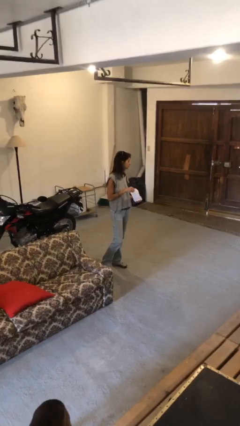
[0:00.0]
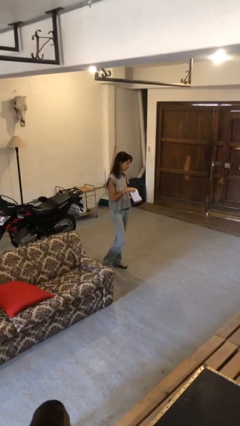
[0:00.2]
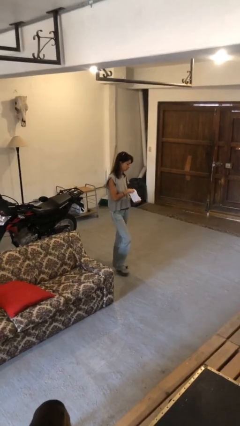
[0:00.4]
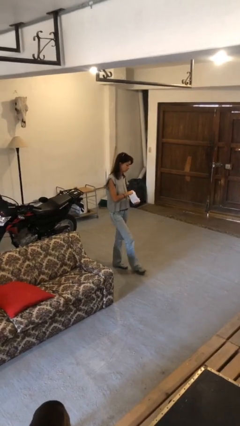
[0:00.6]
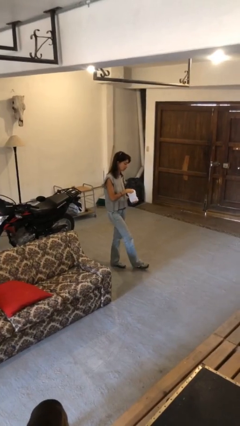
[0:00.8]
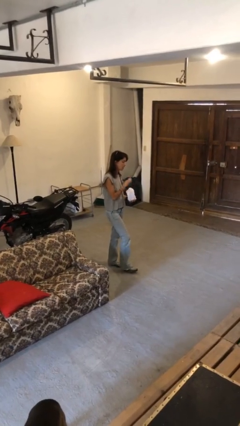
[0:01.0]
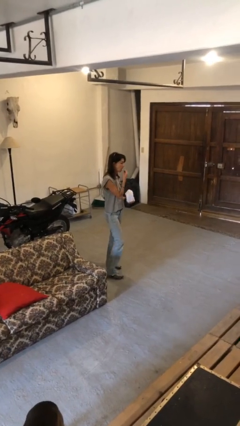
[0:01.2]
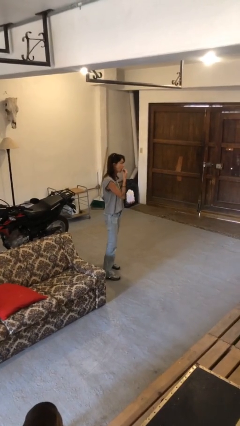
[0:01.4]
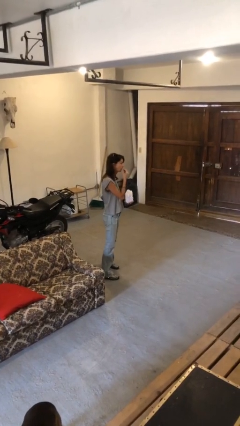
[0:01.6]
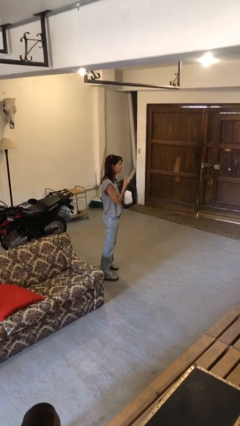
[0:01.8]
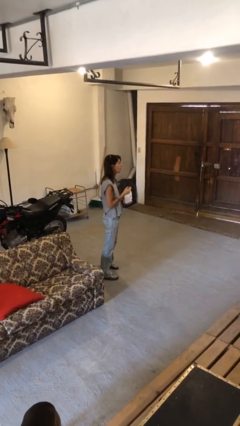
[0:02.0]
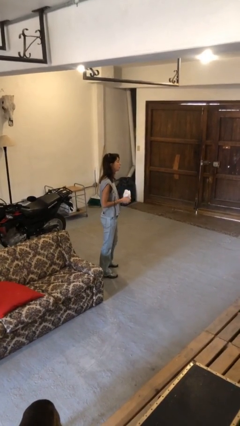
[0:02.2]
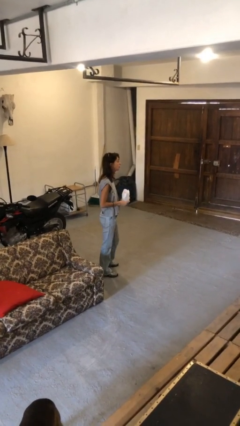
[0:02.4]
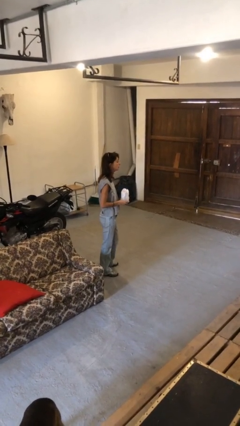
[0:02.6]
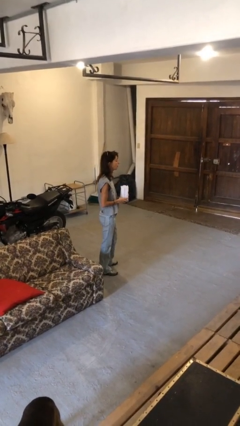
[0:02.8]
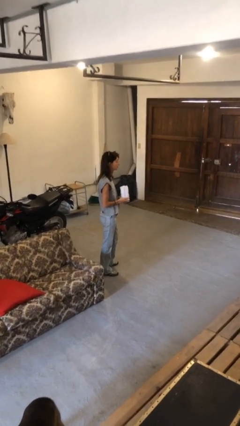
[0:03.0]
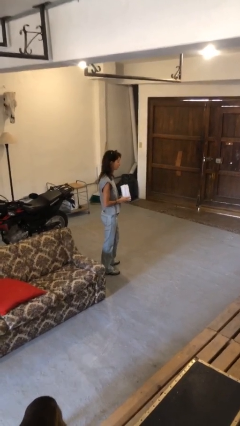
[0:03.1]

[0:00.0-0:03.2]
person eats snack from bag

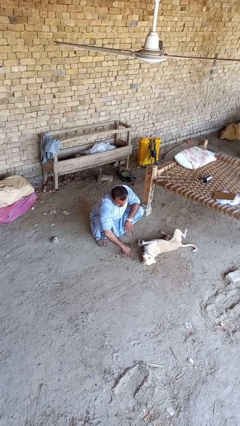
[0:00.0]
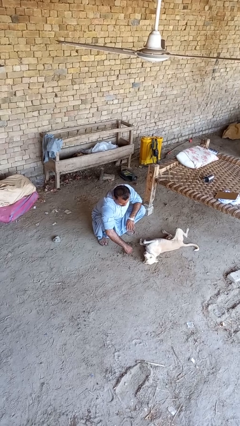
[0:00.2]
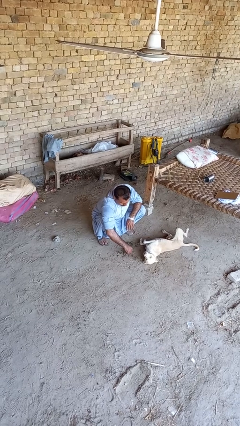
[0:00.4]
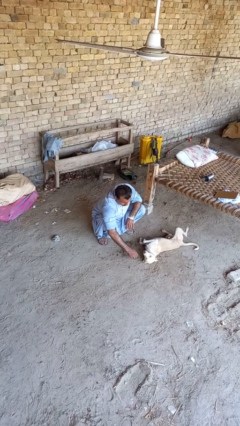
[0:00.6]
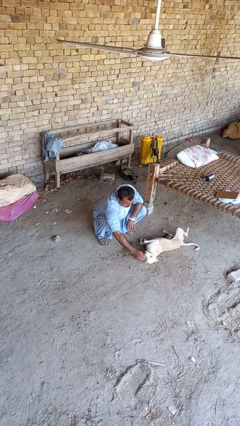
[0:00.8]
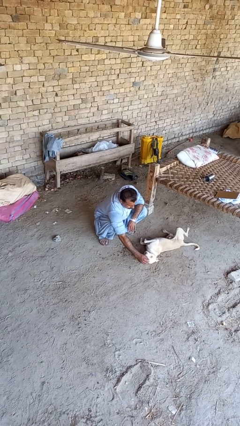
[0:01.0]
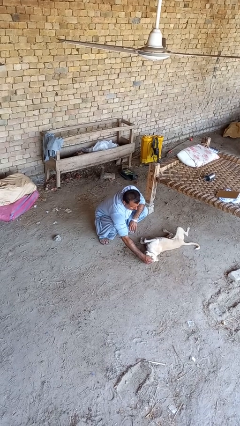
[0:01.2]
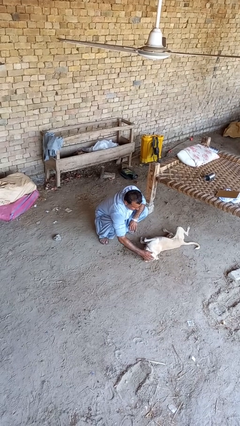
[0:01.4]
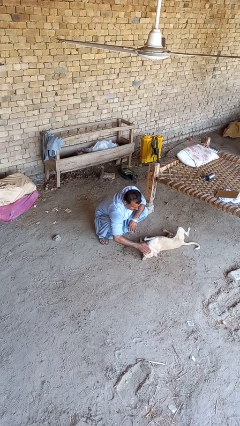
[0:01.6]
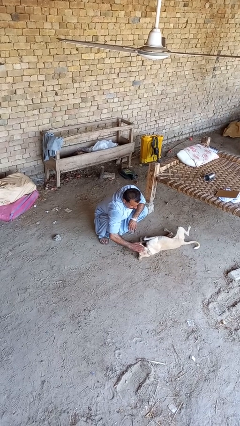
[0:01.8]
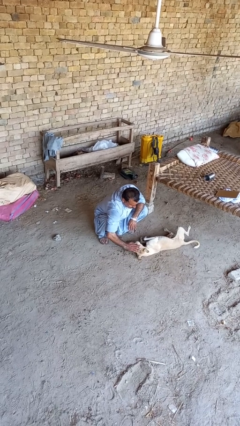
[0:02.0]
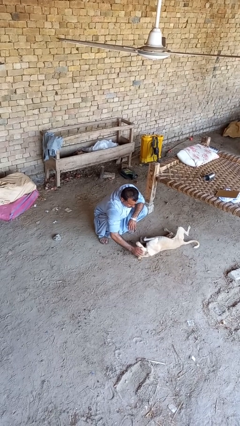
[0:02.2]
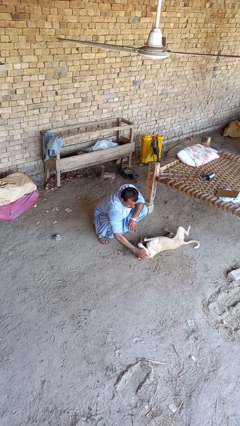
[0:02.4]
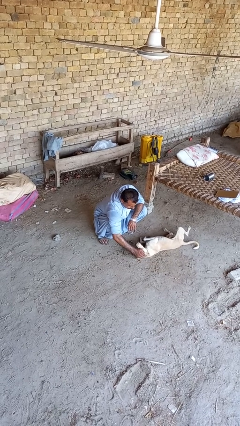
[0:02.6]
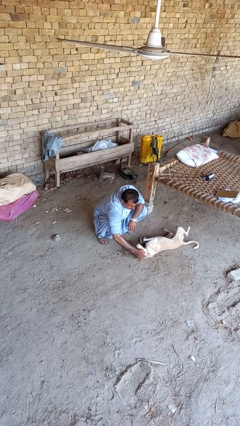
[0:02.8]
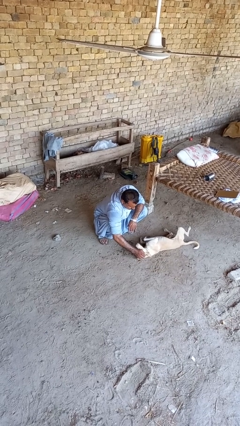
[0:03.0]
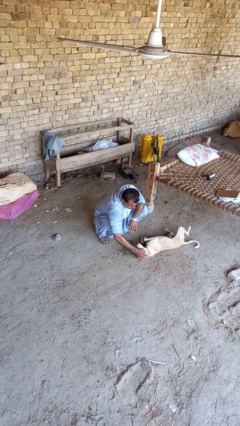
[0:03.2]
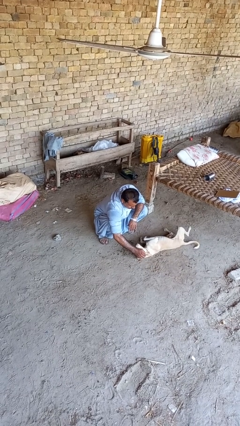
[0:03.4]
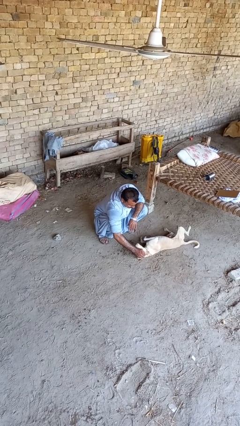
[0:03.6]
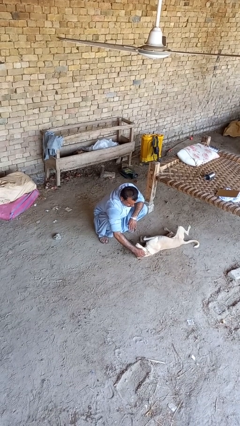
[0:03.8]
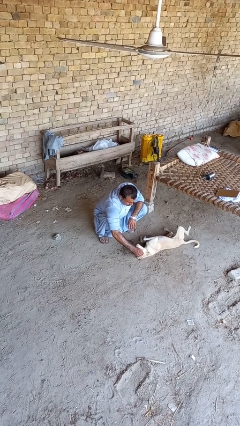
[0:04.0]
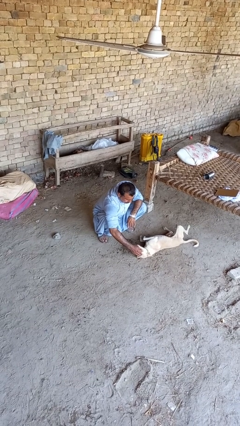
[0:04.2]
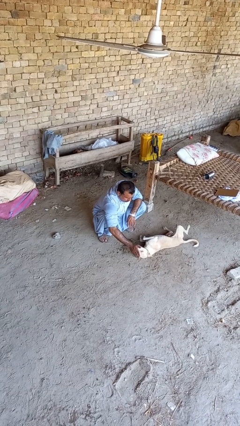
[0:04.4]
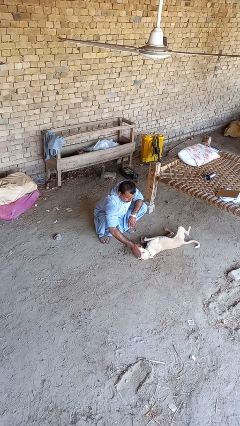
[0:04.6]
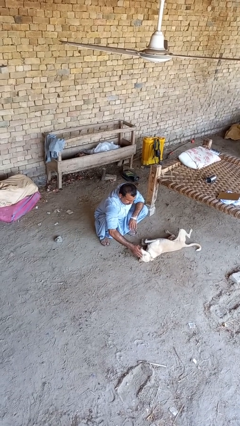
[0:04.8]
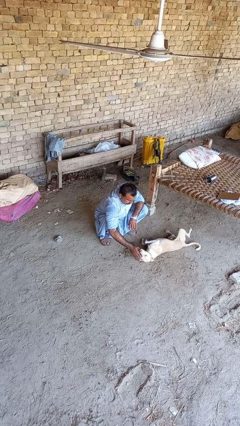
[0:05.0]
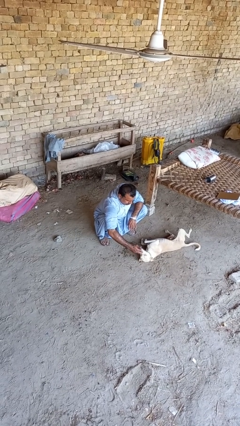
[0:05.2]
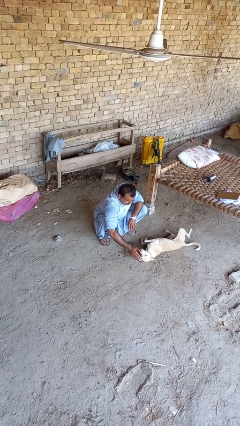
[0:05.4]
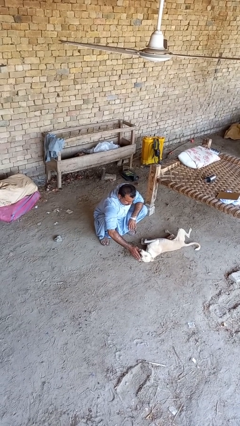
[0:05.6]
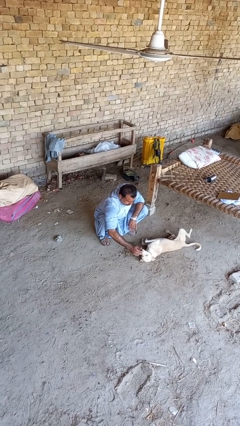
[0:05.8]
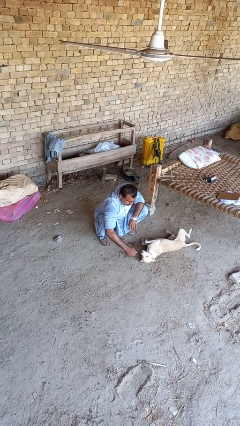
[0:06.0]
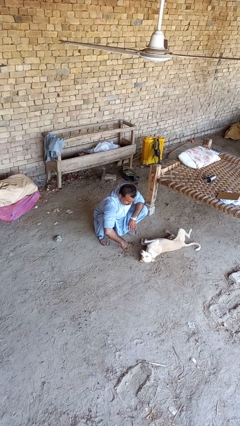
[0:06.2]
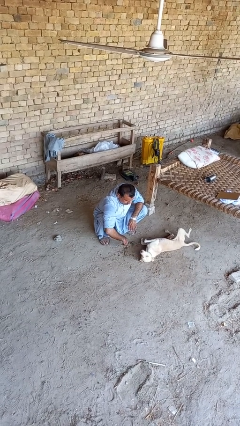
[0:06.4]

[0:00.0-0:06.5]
person pets dog

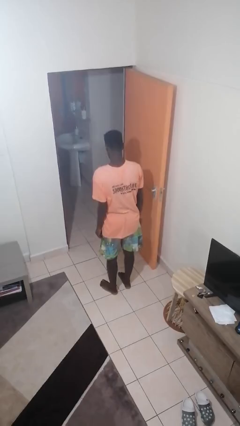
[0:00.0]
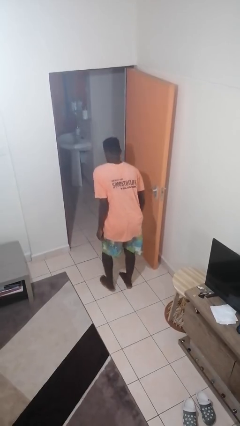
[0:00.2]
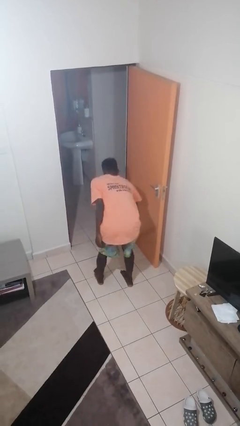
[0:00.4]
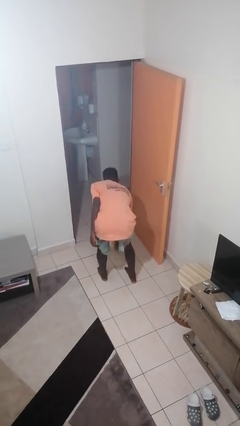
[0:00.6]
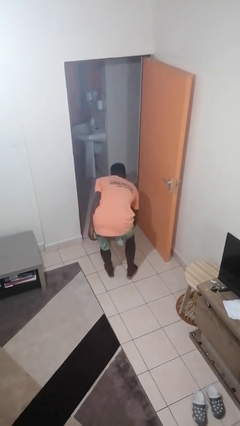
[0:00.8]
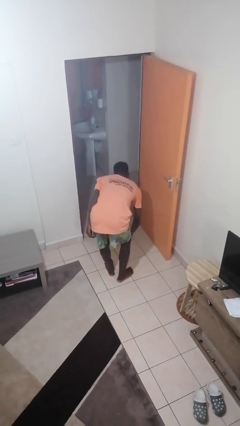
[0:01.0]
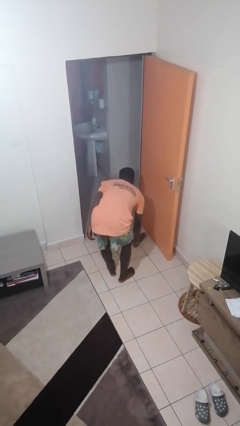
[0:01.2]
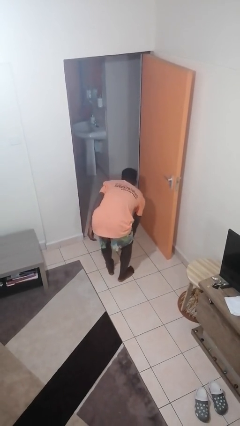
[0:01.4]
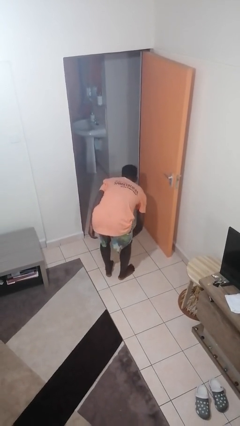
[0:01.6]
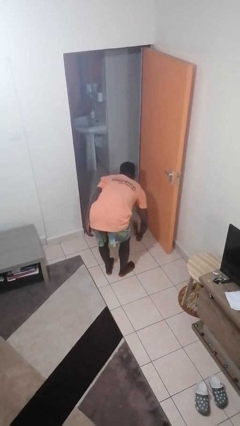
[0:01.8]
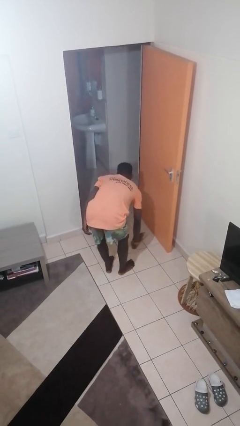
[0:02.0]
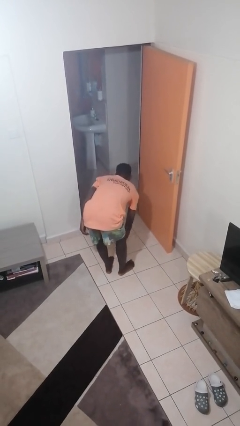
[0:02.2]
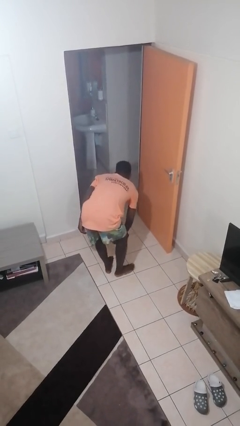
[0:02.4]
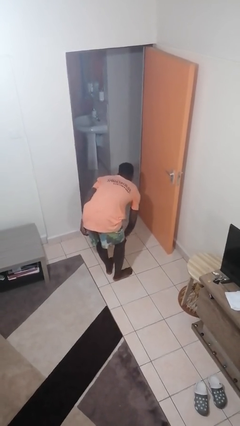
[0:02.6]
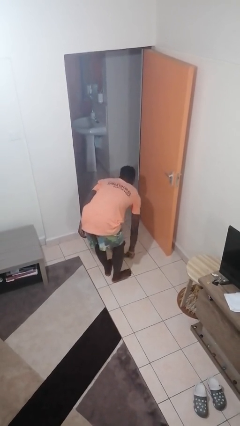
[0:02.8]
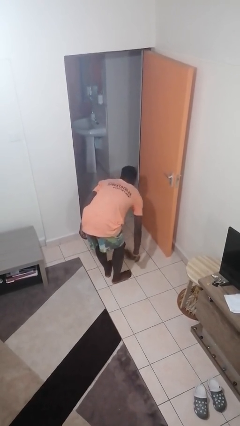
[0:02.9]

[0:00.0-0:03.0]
person sweeps floor

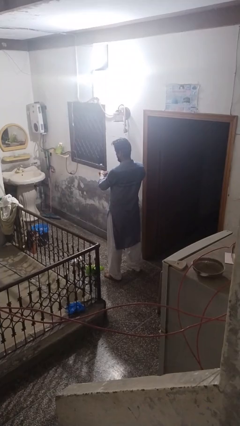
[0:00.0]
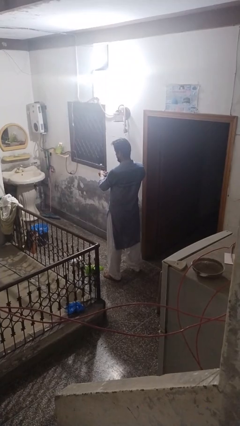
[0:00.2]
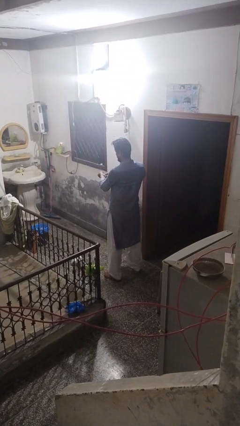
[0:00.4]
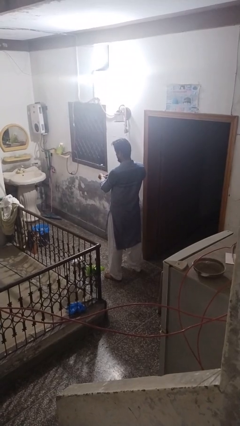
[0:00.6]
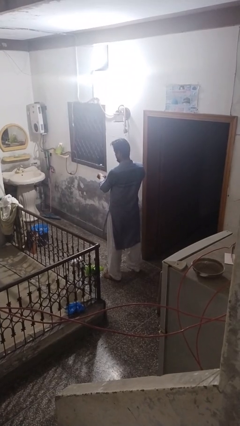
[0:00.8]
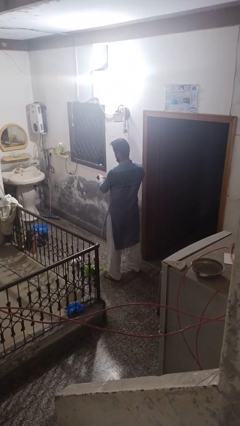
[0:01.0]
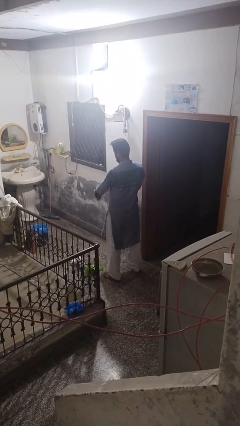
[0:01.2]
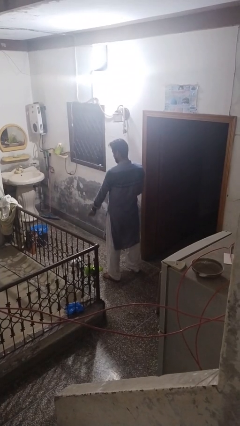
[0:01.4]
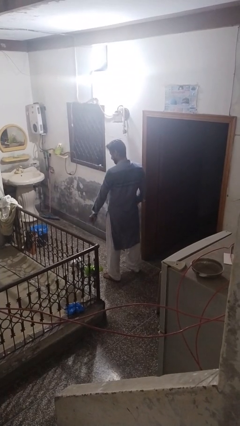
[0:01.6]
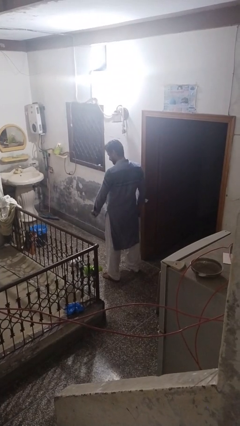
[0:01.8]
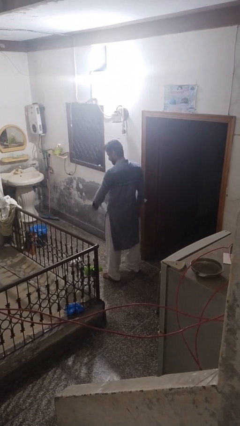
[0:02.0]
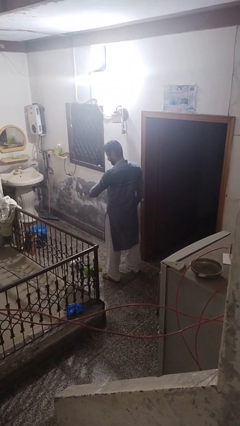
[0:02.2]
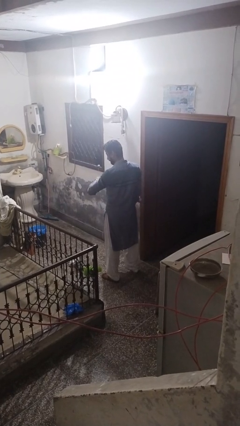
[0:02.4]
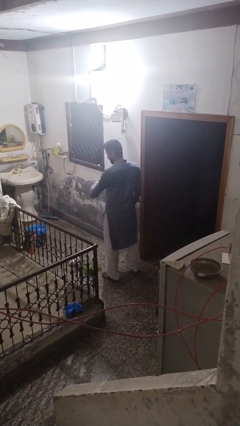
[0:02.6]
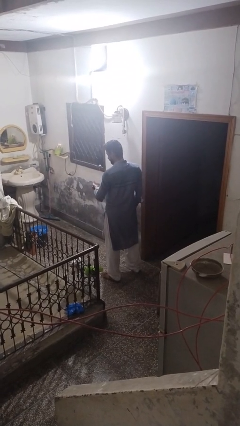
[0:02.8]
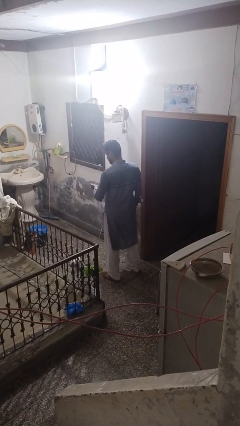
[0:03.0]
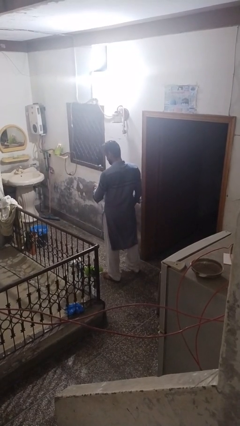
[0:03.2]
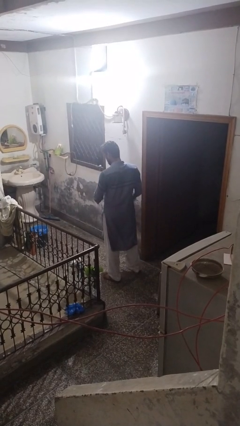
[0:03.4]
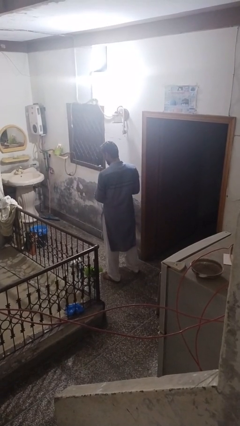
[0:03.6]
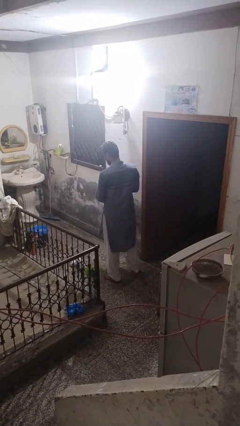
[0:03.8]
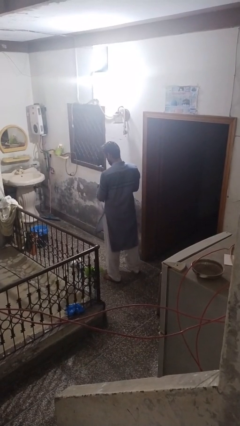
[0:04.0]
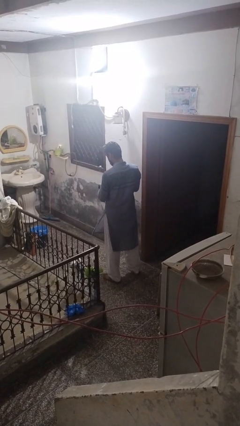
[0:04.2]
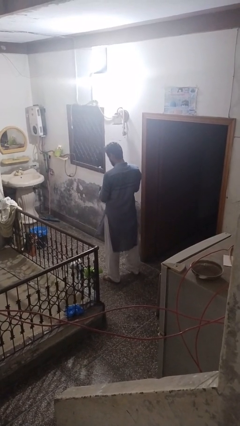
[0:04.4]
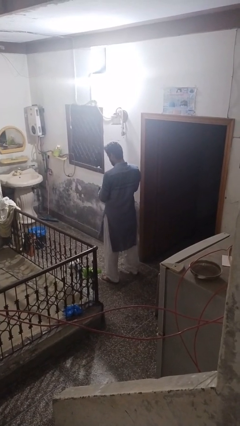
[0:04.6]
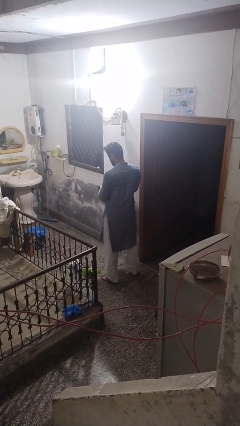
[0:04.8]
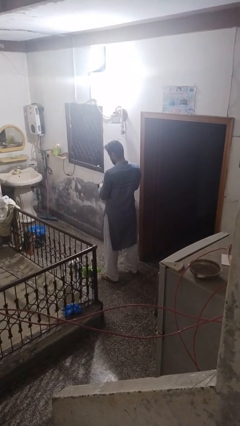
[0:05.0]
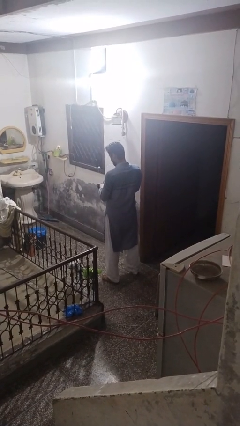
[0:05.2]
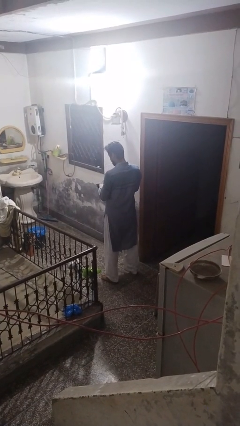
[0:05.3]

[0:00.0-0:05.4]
person dries hands with towel
